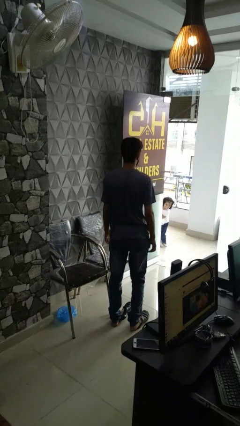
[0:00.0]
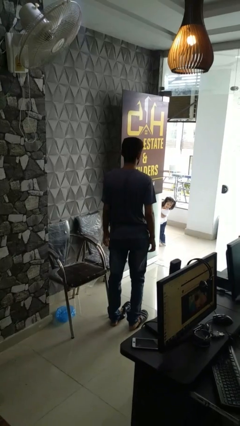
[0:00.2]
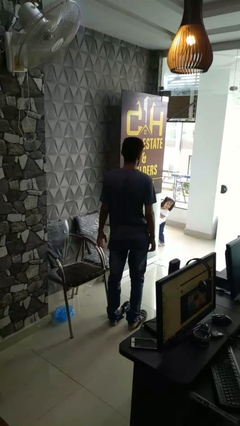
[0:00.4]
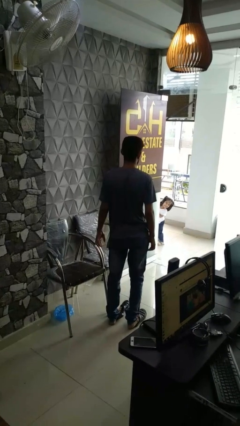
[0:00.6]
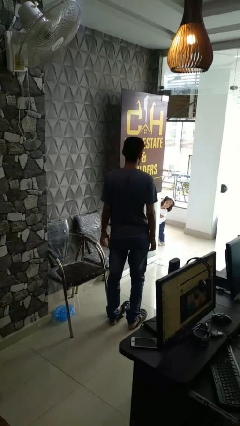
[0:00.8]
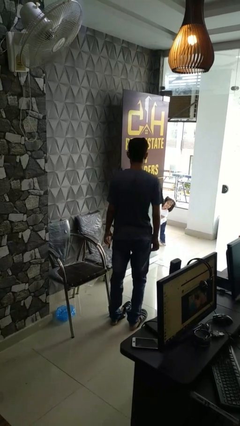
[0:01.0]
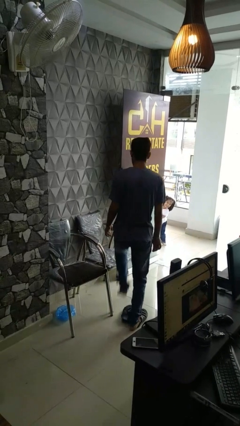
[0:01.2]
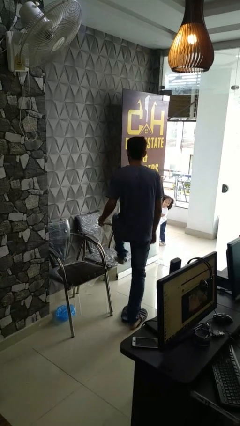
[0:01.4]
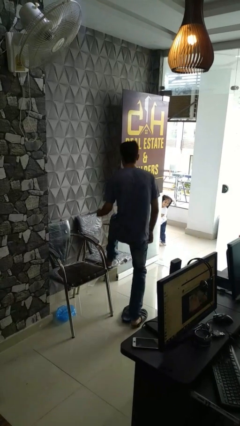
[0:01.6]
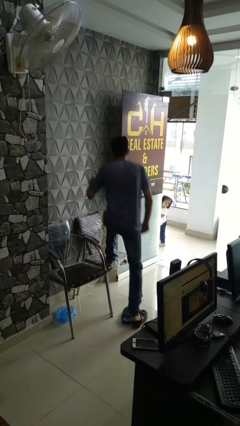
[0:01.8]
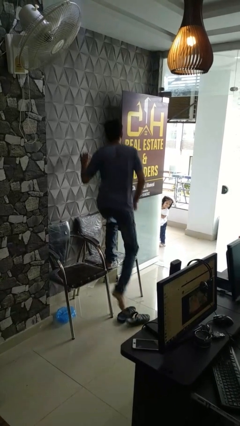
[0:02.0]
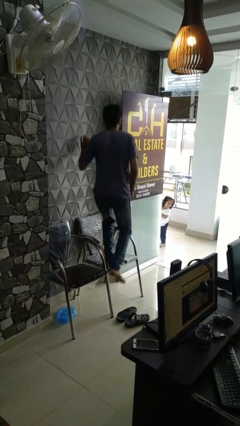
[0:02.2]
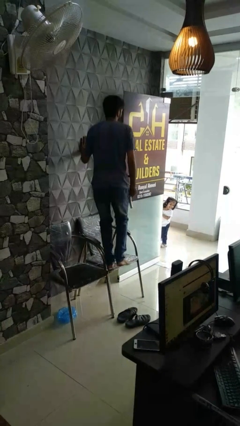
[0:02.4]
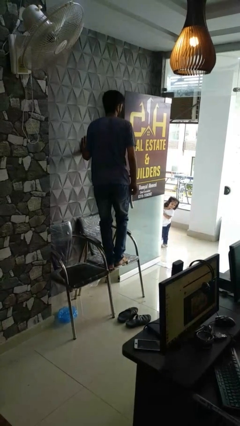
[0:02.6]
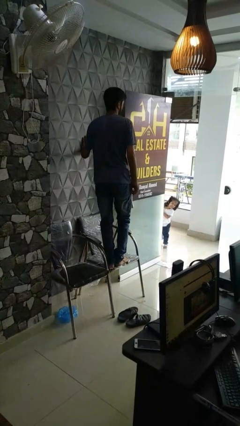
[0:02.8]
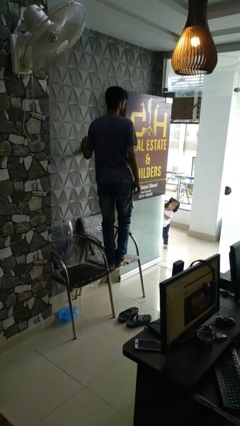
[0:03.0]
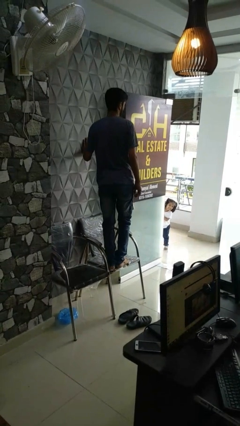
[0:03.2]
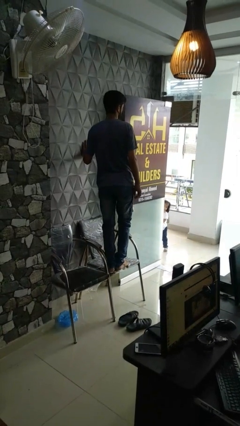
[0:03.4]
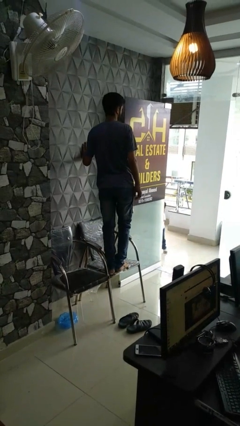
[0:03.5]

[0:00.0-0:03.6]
person climbs on chair

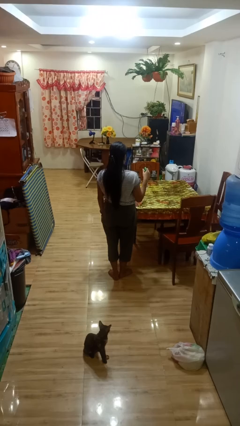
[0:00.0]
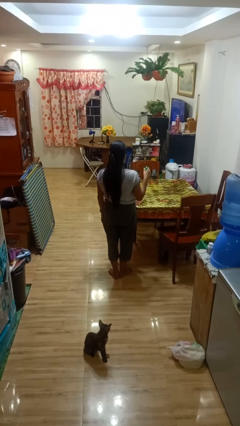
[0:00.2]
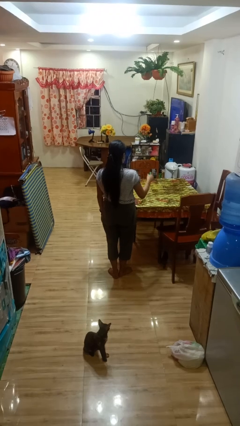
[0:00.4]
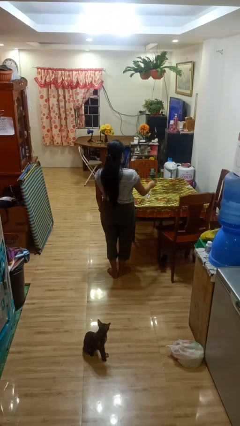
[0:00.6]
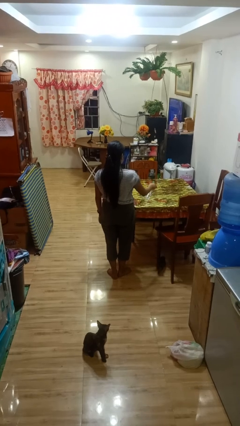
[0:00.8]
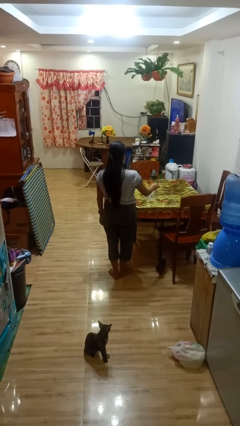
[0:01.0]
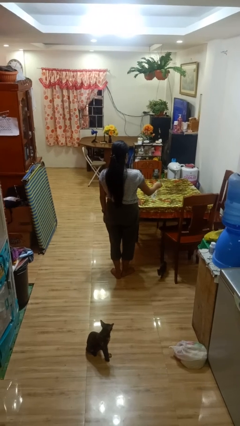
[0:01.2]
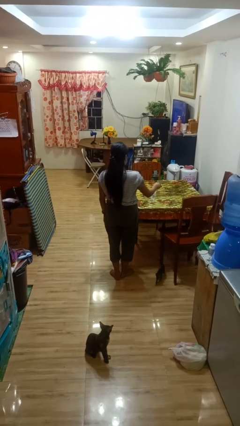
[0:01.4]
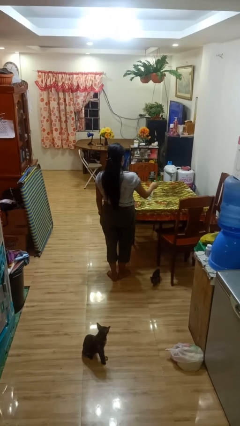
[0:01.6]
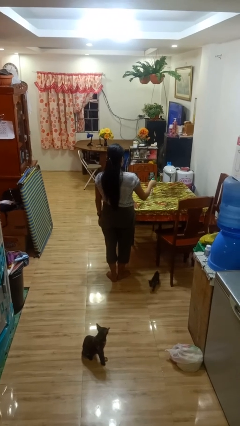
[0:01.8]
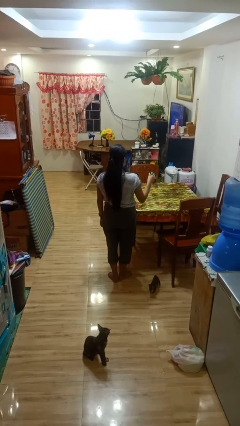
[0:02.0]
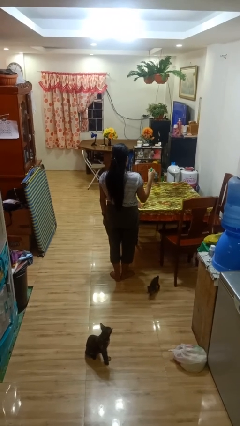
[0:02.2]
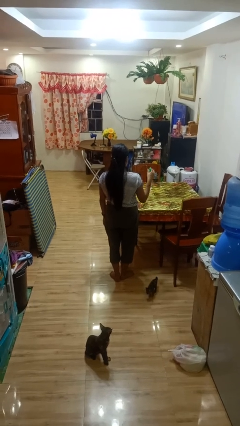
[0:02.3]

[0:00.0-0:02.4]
person sprays from bottle

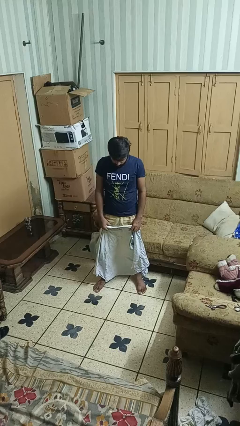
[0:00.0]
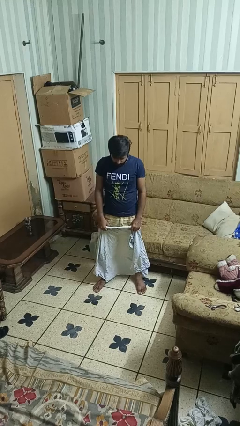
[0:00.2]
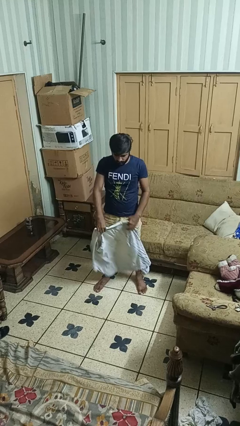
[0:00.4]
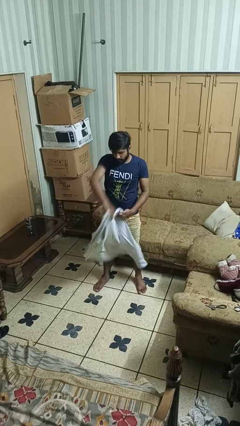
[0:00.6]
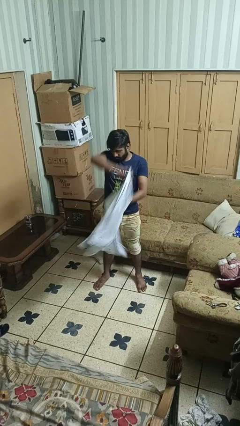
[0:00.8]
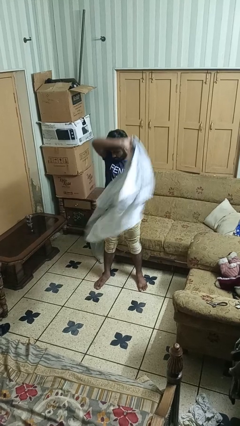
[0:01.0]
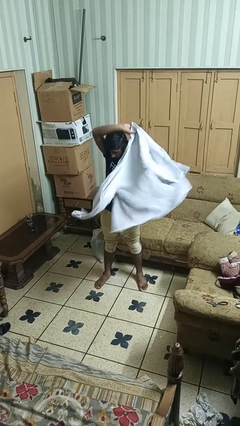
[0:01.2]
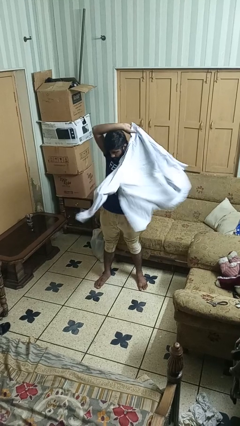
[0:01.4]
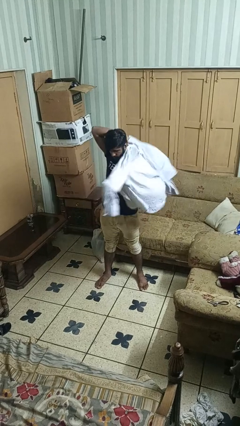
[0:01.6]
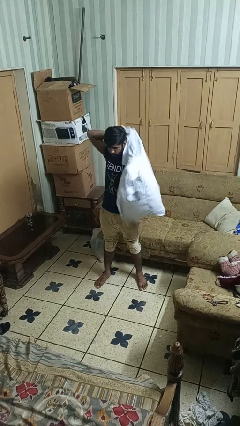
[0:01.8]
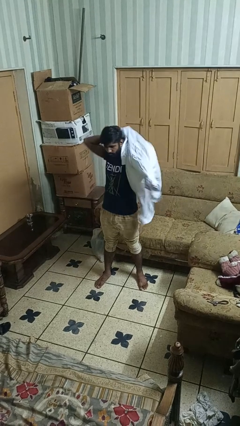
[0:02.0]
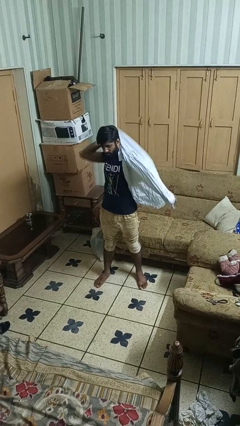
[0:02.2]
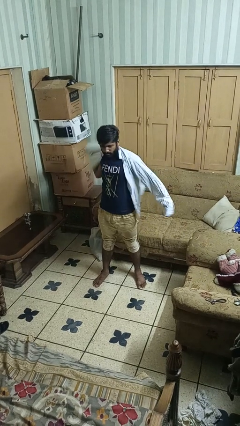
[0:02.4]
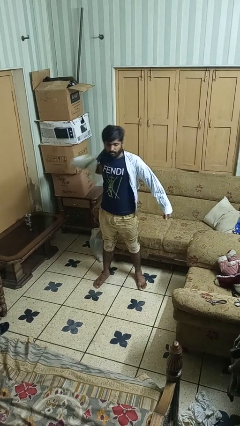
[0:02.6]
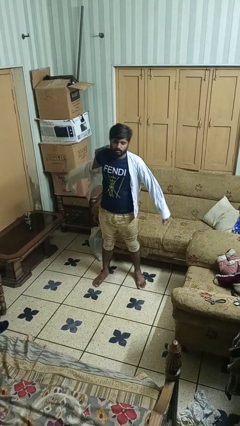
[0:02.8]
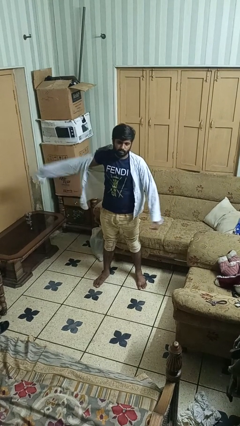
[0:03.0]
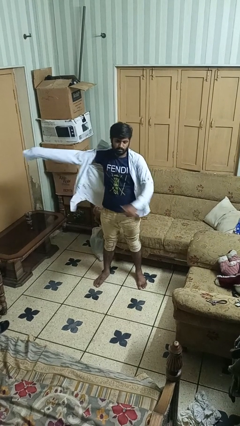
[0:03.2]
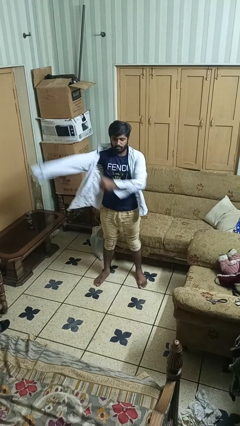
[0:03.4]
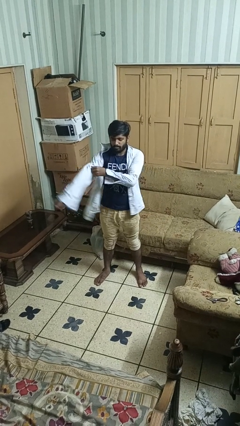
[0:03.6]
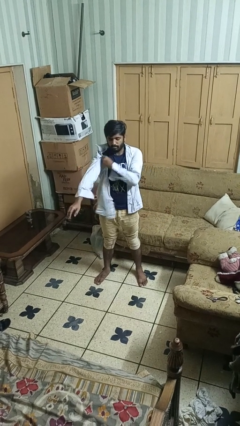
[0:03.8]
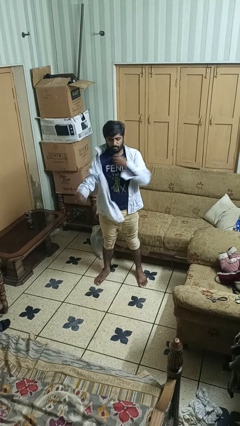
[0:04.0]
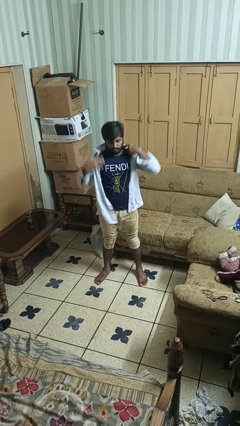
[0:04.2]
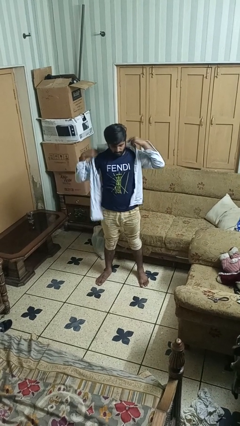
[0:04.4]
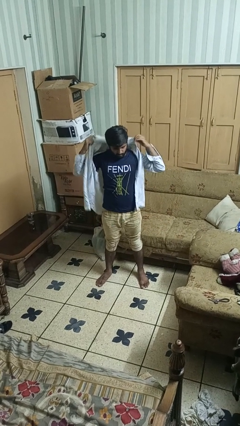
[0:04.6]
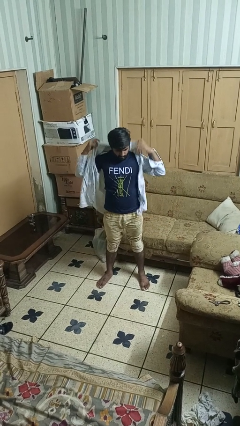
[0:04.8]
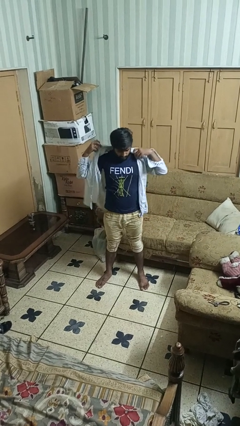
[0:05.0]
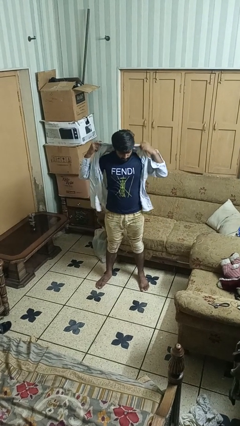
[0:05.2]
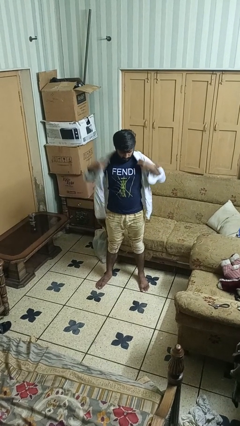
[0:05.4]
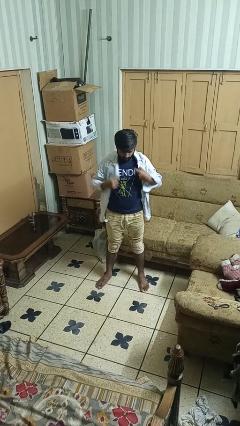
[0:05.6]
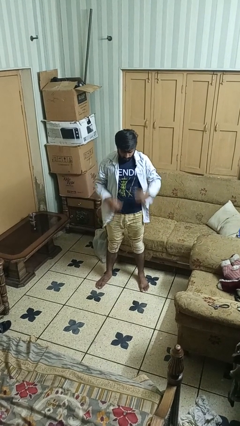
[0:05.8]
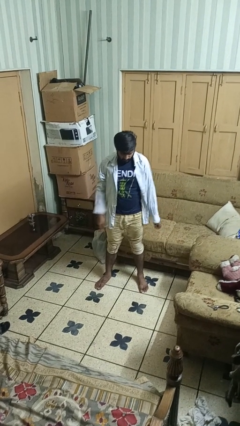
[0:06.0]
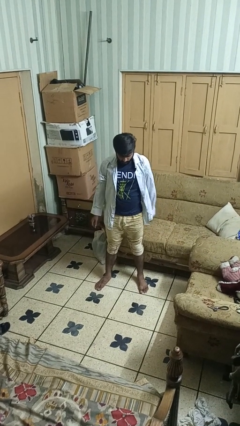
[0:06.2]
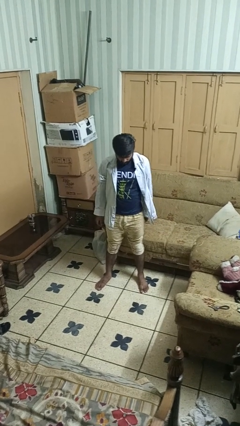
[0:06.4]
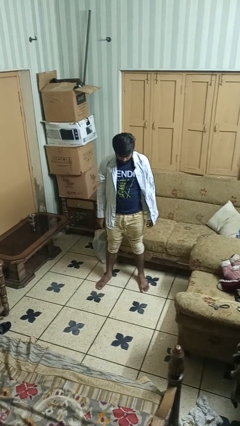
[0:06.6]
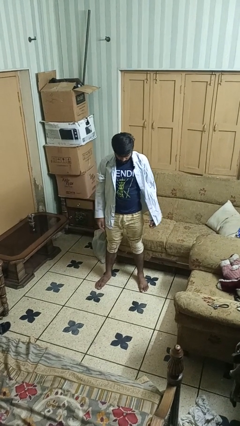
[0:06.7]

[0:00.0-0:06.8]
person puts on shirt

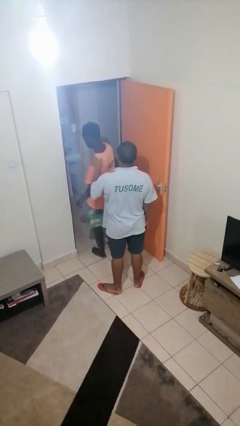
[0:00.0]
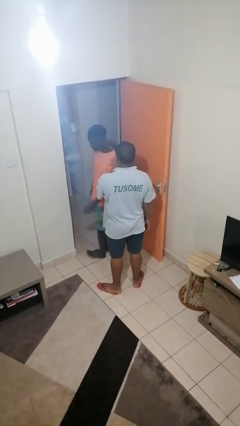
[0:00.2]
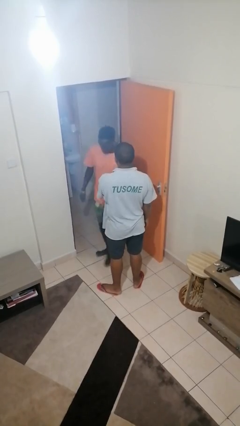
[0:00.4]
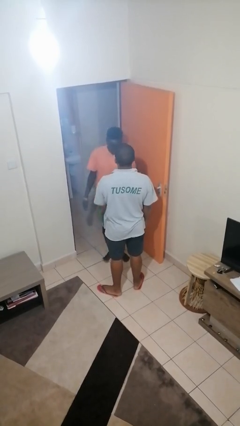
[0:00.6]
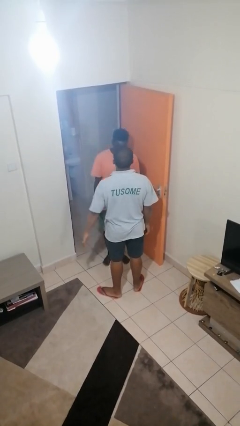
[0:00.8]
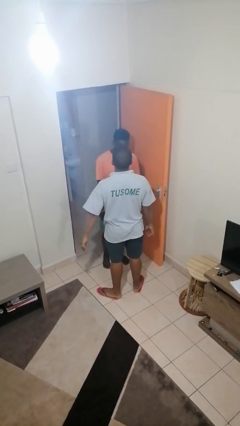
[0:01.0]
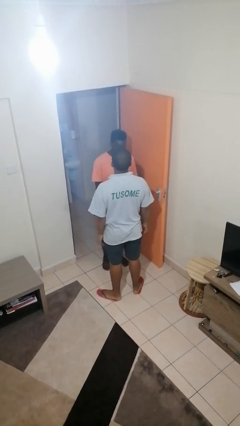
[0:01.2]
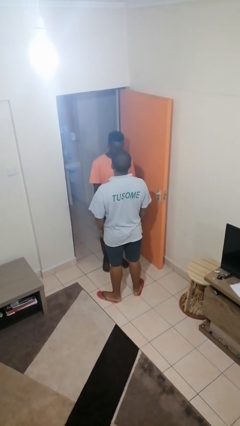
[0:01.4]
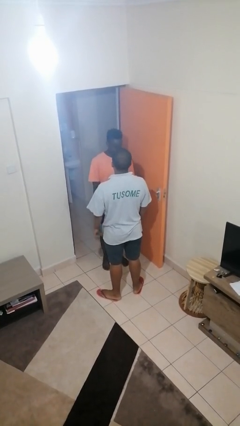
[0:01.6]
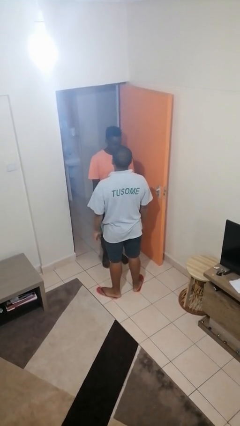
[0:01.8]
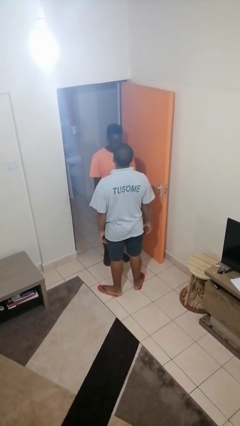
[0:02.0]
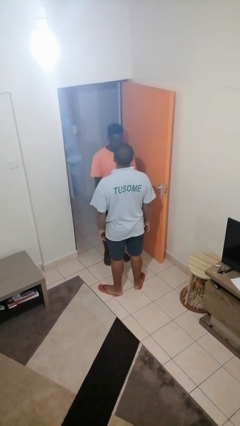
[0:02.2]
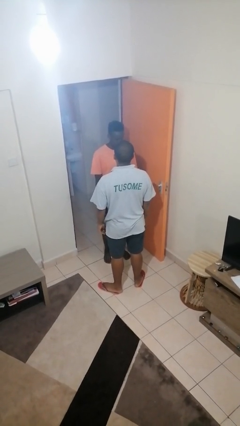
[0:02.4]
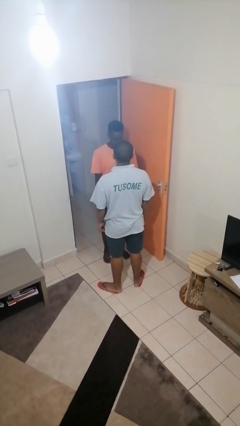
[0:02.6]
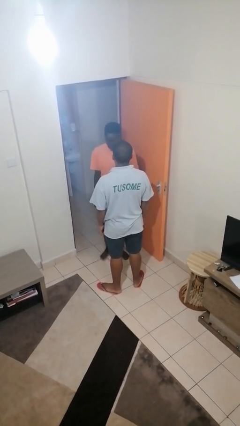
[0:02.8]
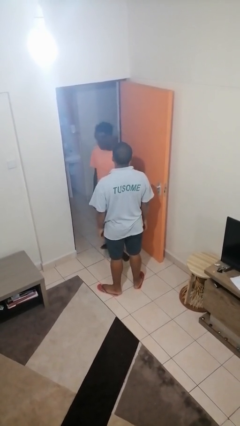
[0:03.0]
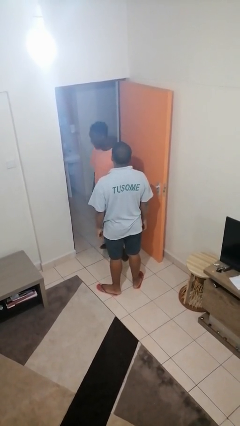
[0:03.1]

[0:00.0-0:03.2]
person spins person around

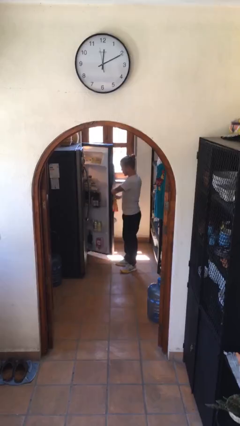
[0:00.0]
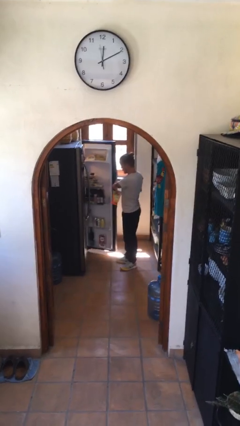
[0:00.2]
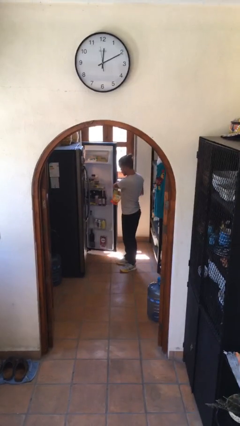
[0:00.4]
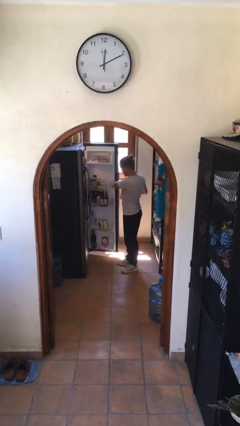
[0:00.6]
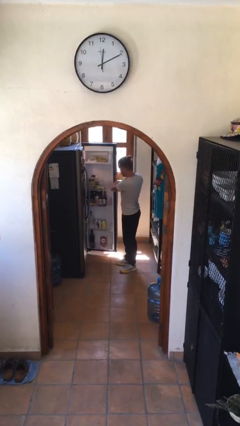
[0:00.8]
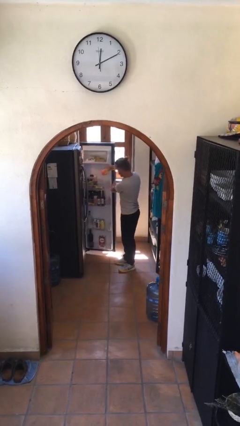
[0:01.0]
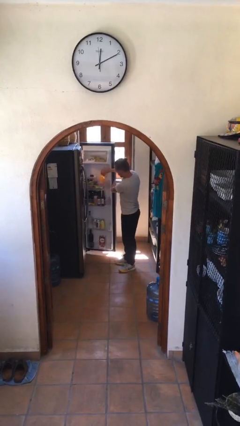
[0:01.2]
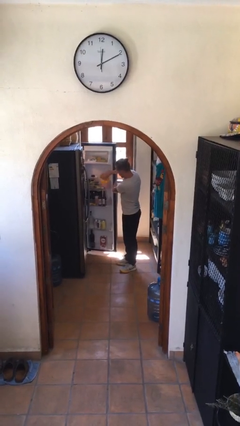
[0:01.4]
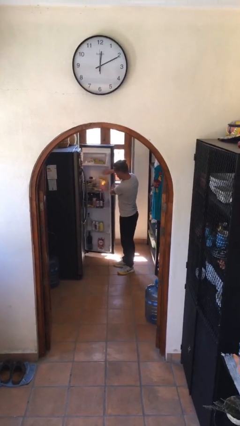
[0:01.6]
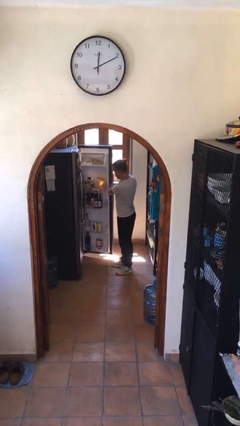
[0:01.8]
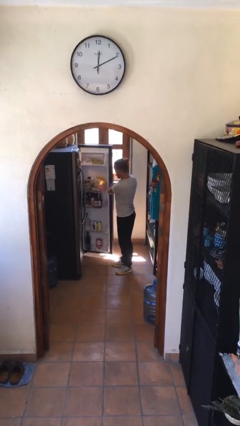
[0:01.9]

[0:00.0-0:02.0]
person puts object into refrigerator
